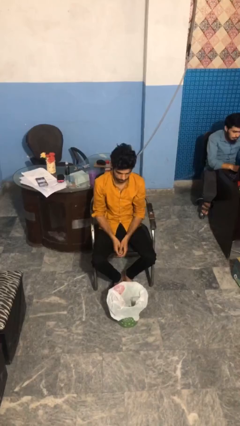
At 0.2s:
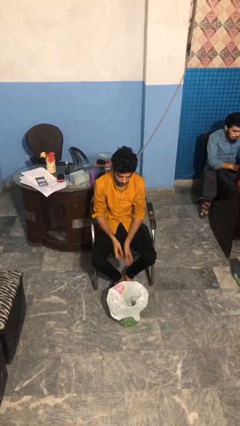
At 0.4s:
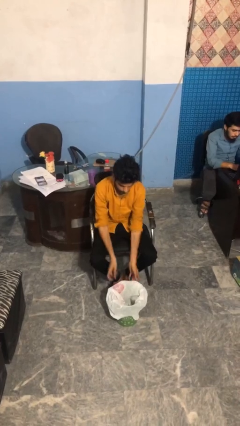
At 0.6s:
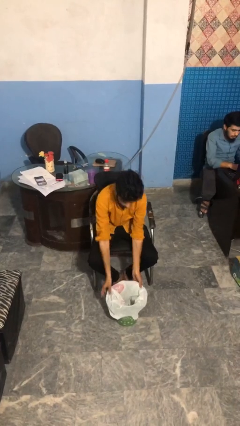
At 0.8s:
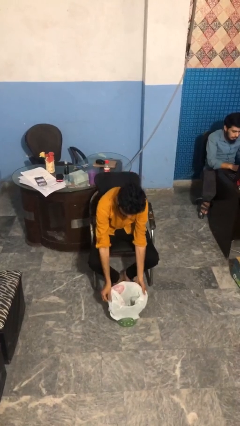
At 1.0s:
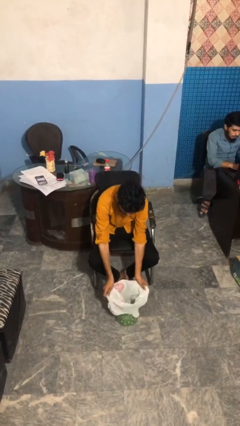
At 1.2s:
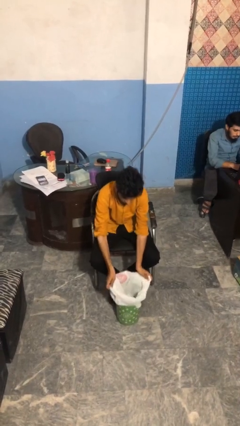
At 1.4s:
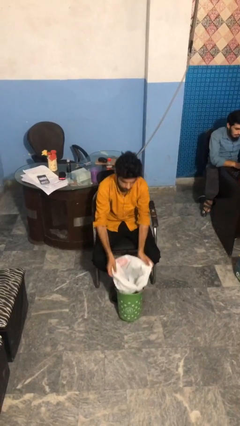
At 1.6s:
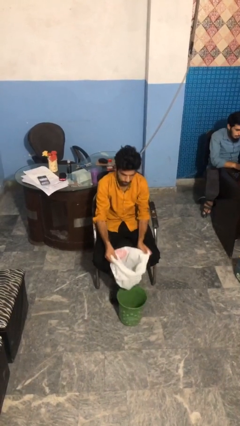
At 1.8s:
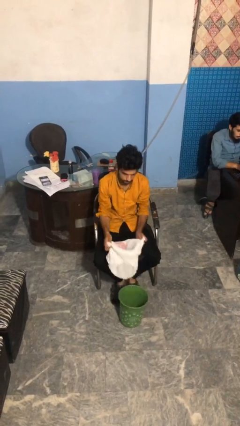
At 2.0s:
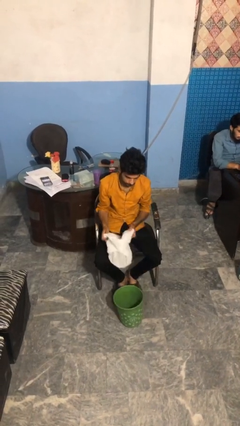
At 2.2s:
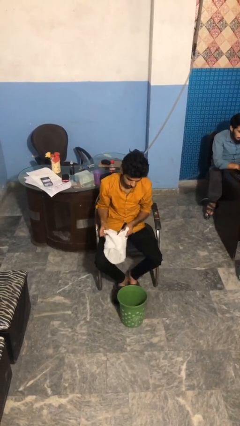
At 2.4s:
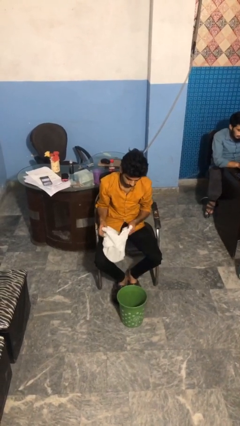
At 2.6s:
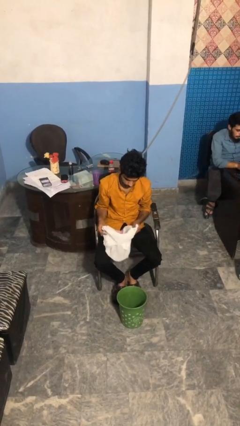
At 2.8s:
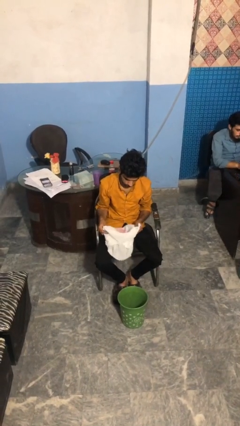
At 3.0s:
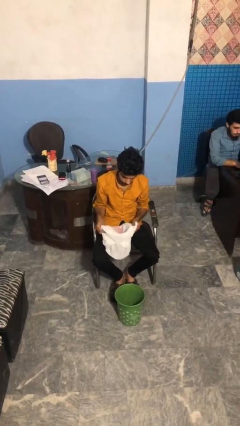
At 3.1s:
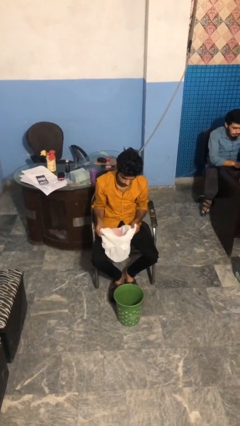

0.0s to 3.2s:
person removes trashbag from trashcan

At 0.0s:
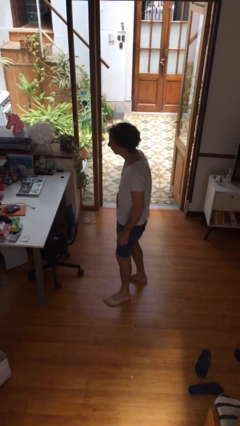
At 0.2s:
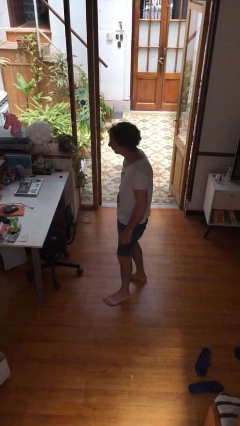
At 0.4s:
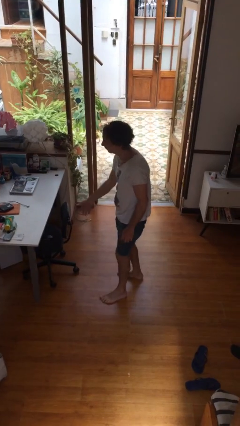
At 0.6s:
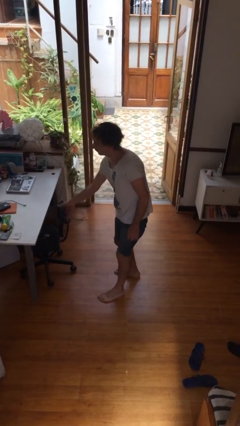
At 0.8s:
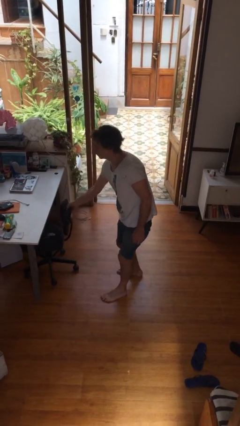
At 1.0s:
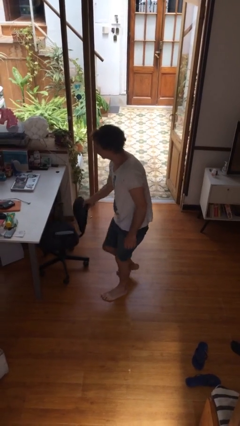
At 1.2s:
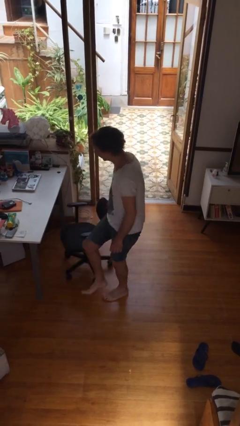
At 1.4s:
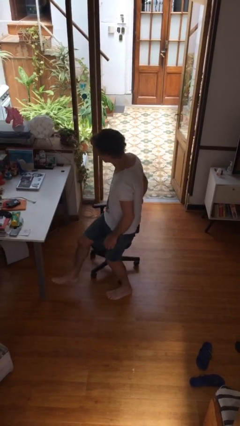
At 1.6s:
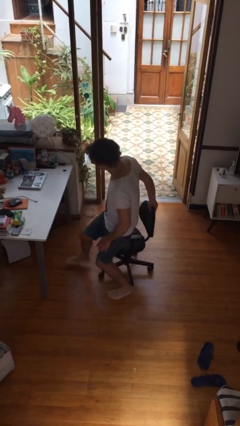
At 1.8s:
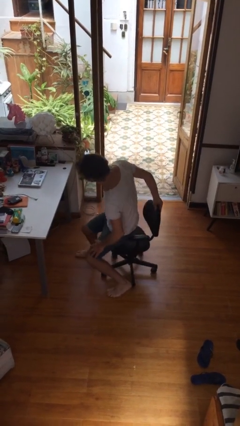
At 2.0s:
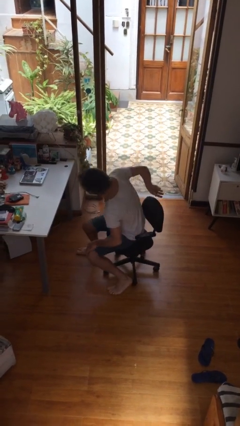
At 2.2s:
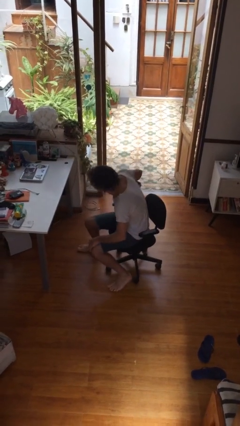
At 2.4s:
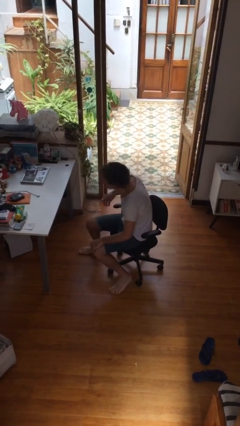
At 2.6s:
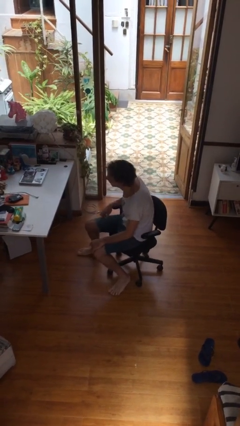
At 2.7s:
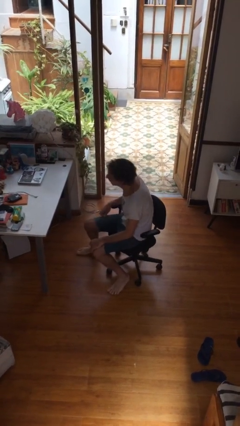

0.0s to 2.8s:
person sits down

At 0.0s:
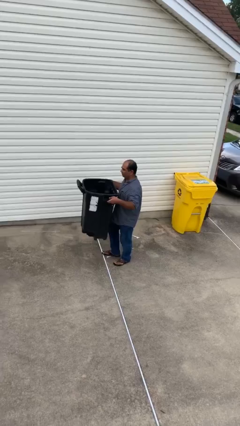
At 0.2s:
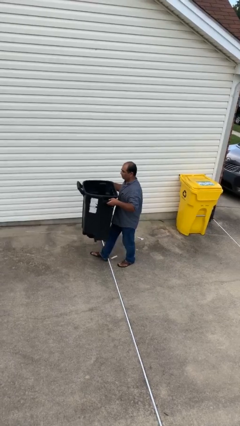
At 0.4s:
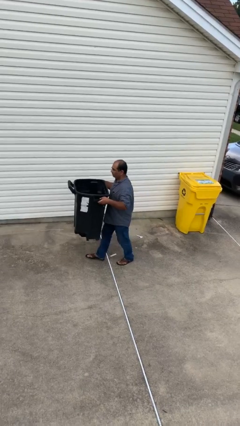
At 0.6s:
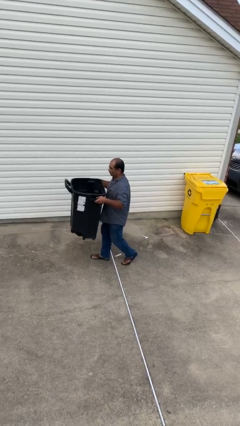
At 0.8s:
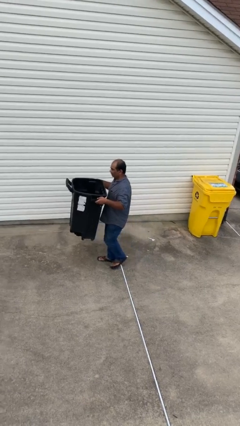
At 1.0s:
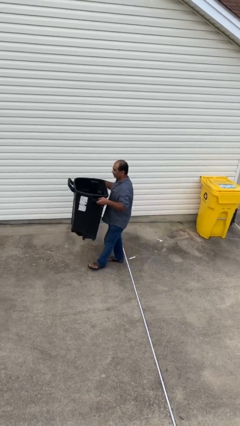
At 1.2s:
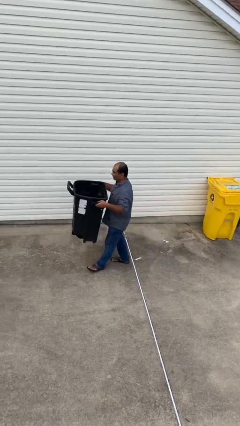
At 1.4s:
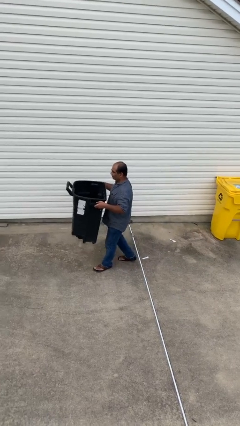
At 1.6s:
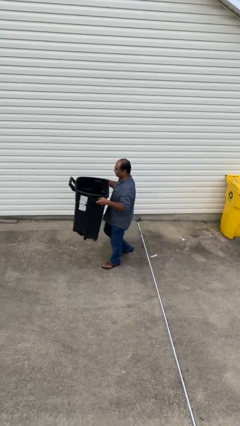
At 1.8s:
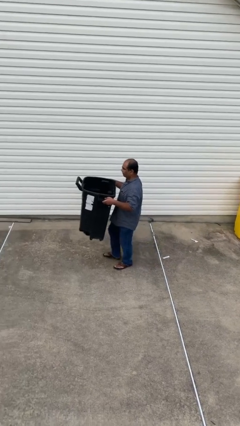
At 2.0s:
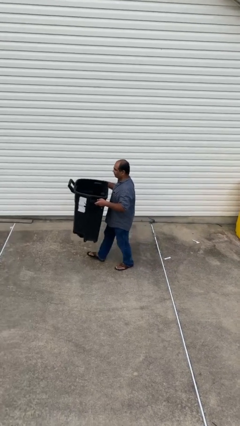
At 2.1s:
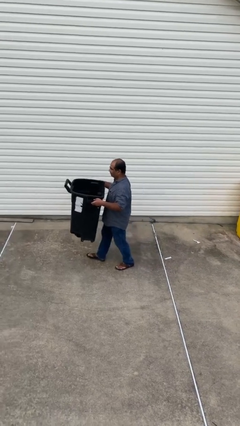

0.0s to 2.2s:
person carries heavy object

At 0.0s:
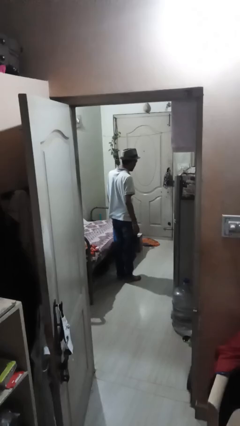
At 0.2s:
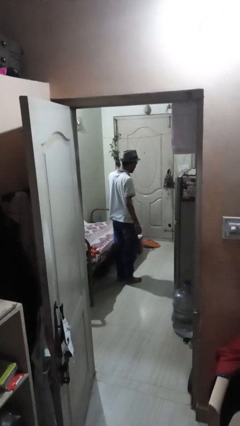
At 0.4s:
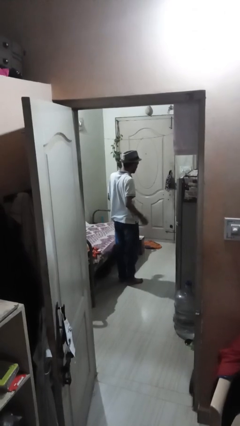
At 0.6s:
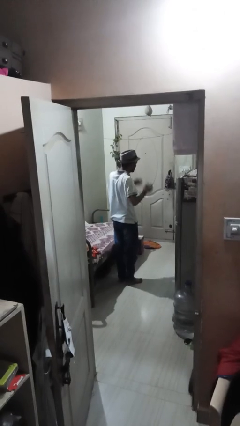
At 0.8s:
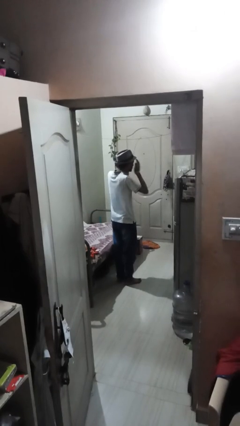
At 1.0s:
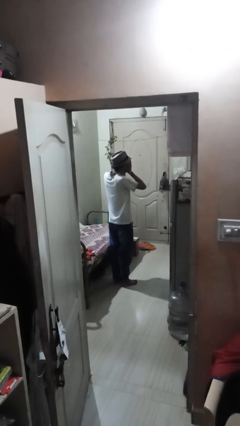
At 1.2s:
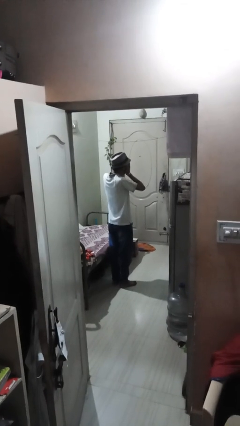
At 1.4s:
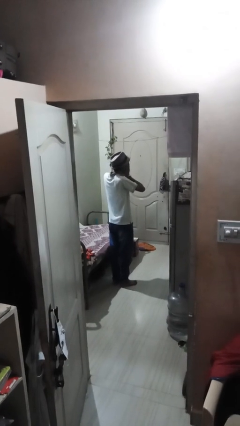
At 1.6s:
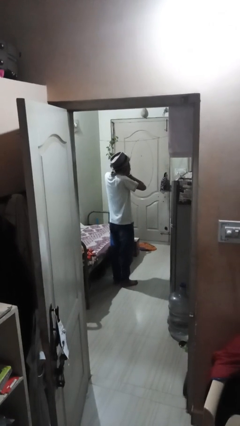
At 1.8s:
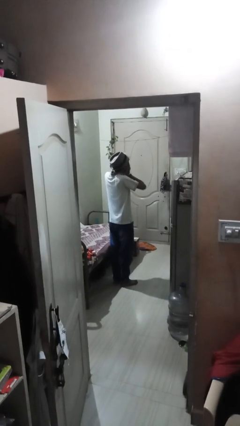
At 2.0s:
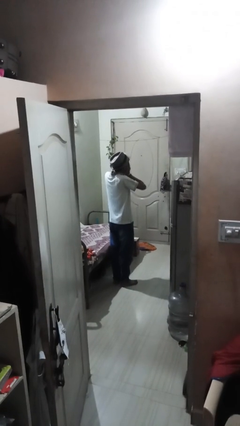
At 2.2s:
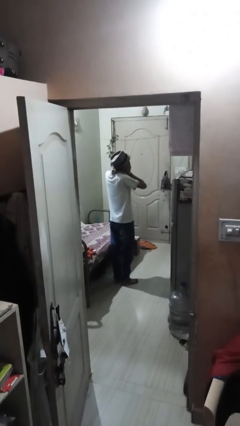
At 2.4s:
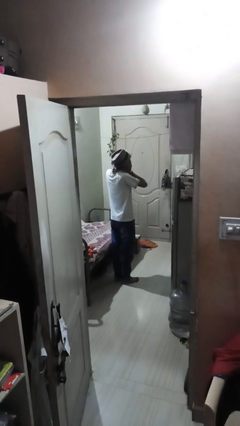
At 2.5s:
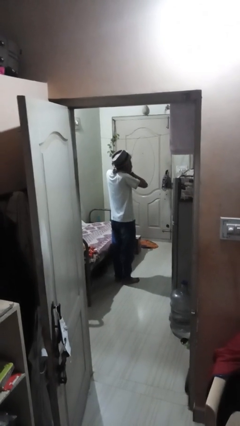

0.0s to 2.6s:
person covers face with hands

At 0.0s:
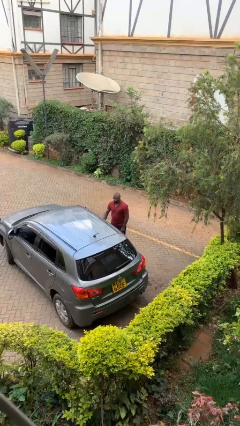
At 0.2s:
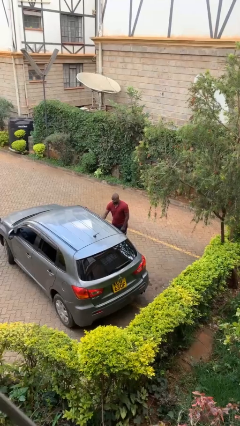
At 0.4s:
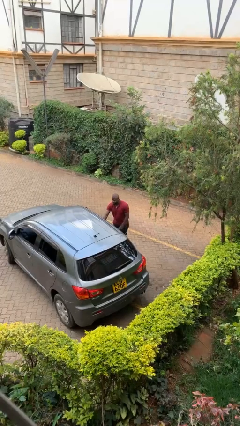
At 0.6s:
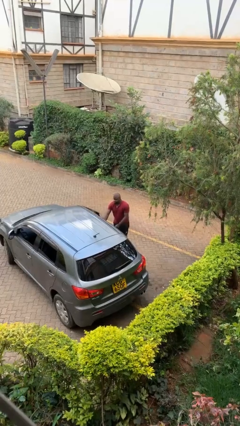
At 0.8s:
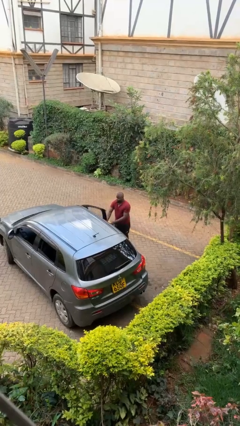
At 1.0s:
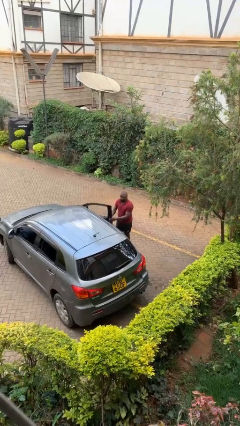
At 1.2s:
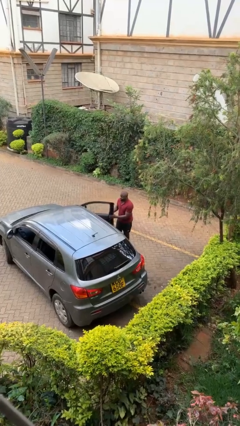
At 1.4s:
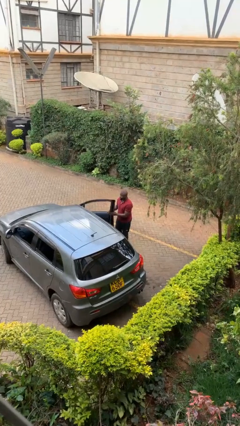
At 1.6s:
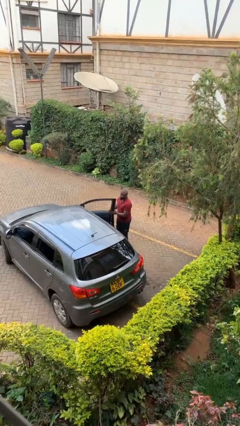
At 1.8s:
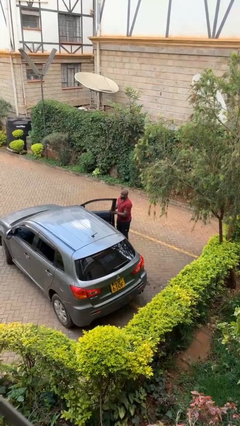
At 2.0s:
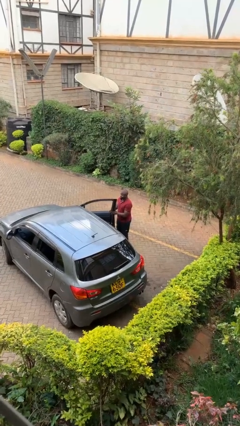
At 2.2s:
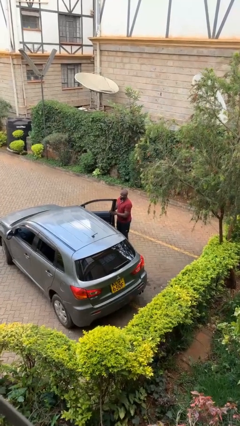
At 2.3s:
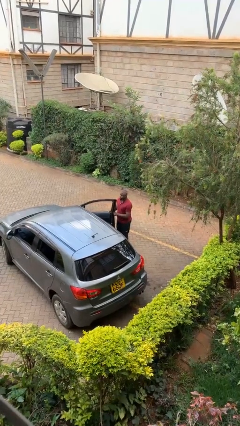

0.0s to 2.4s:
person opens car door

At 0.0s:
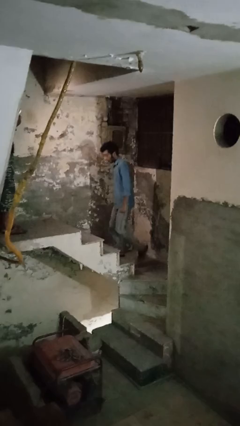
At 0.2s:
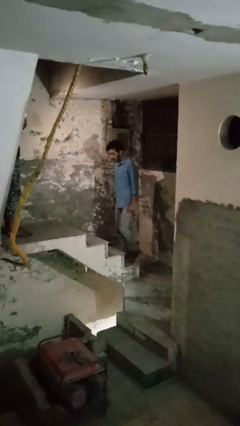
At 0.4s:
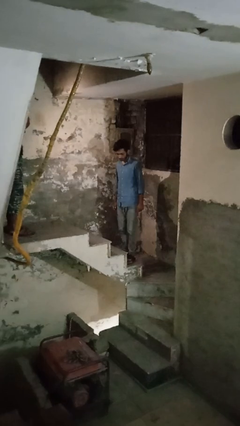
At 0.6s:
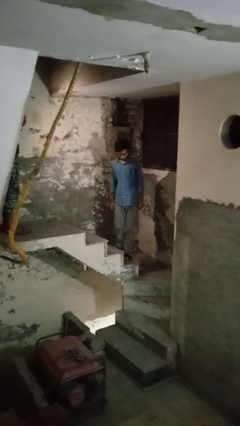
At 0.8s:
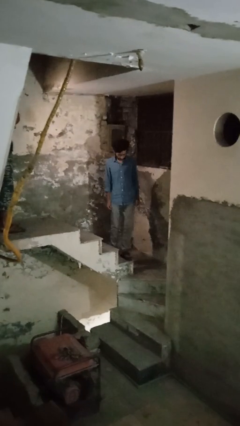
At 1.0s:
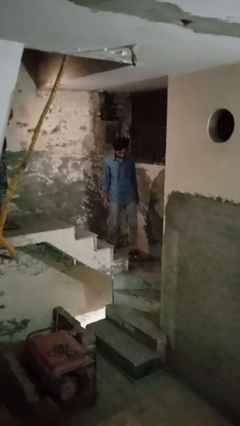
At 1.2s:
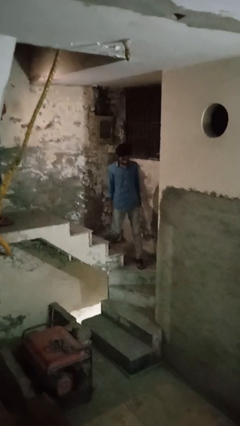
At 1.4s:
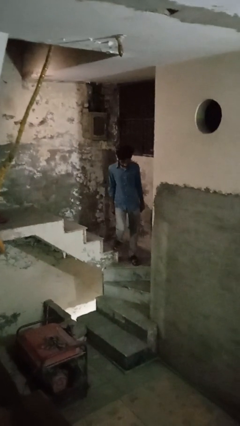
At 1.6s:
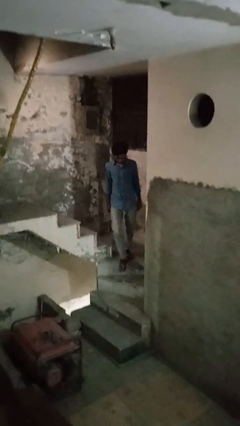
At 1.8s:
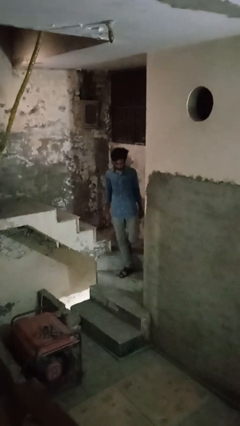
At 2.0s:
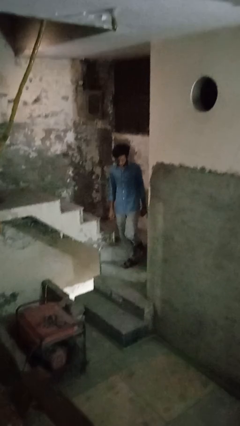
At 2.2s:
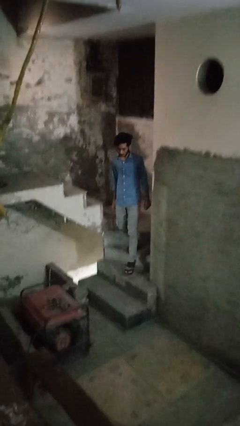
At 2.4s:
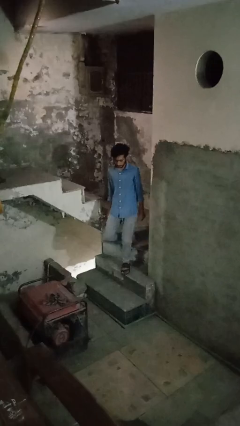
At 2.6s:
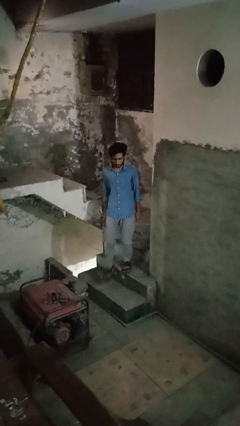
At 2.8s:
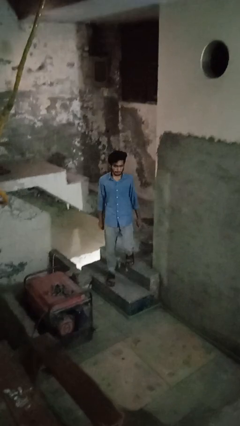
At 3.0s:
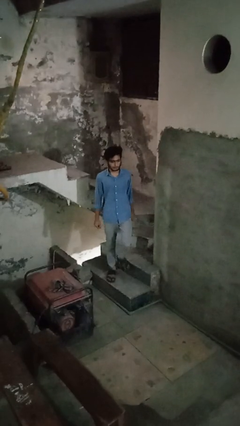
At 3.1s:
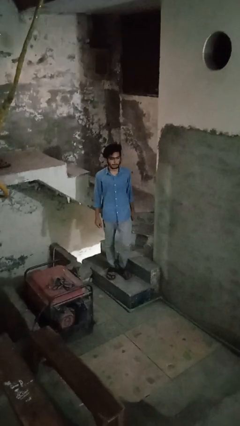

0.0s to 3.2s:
person climbs down stairs

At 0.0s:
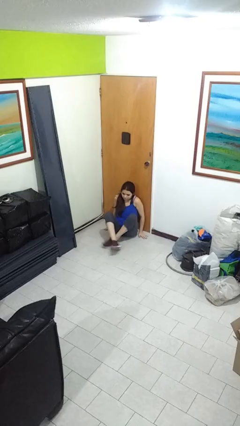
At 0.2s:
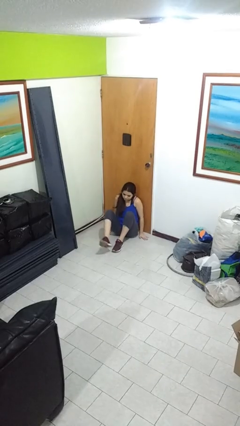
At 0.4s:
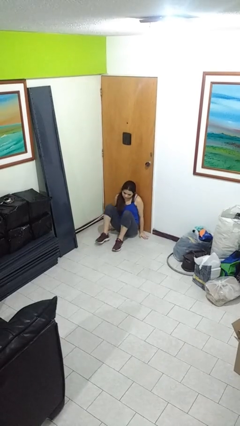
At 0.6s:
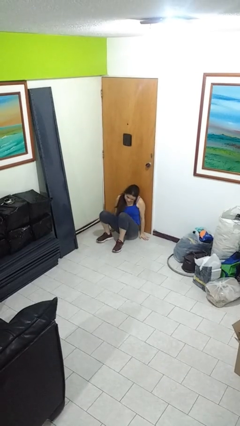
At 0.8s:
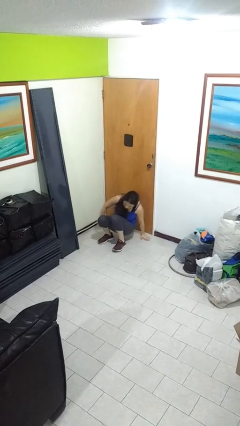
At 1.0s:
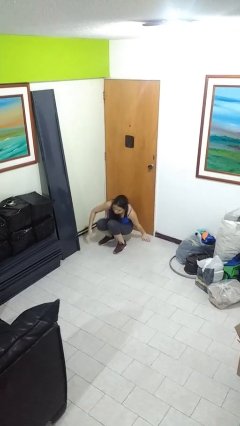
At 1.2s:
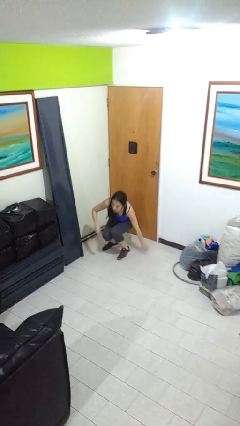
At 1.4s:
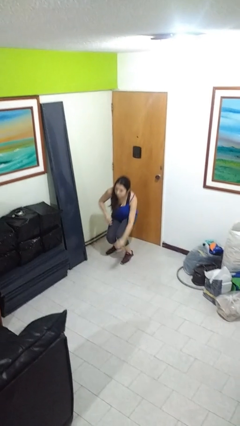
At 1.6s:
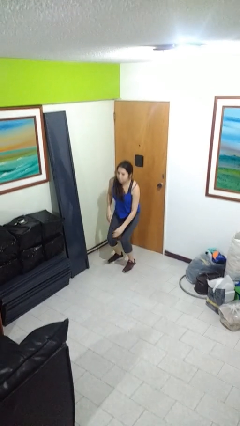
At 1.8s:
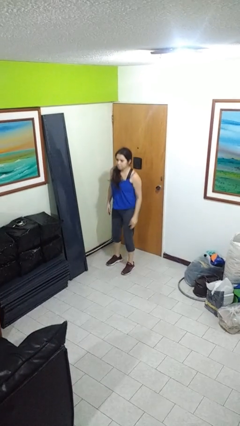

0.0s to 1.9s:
person stands up from floor
